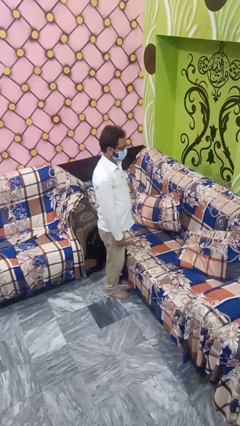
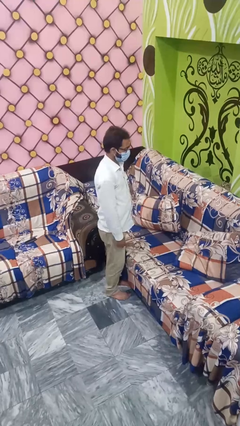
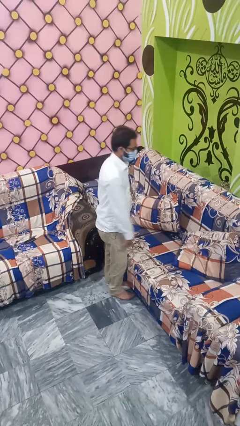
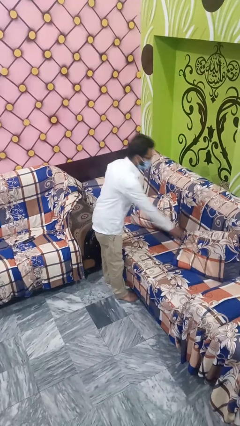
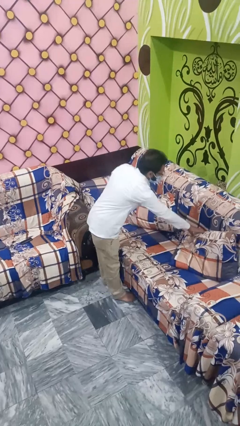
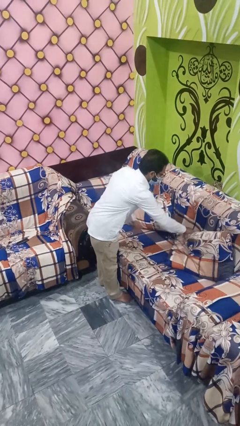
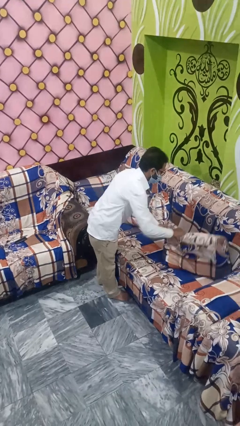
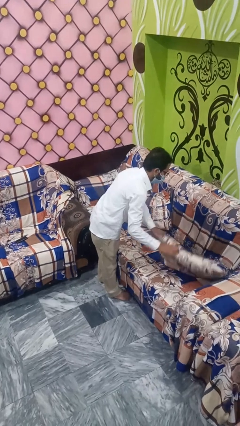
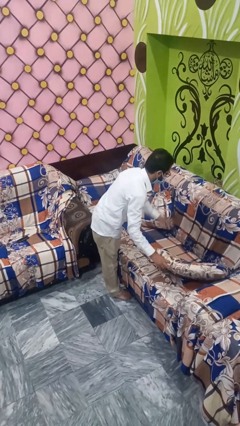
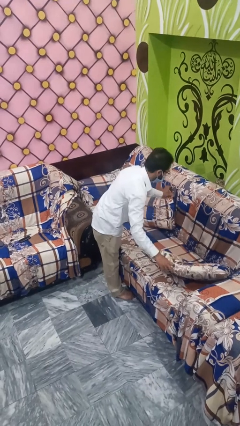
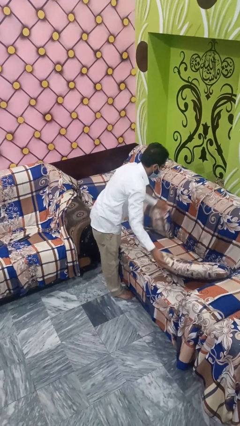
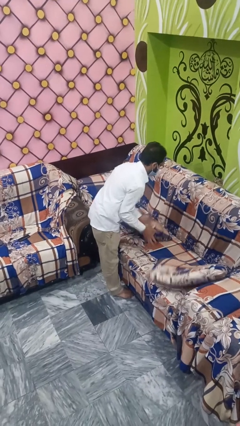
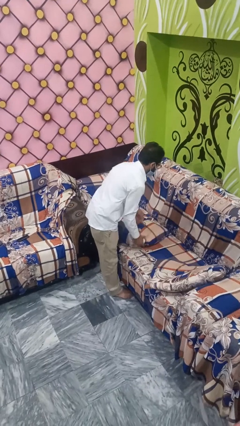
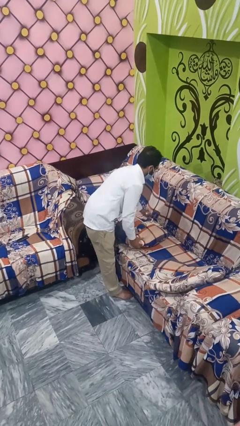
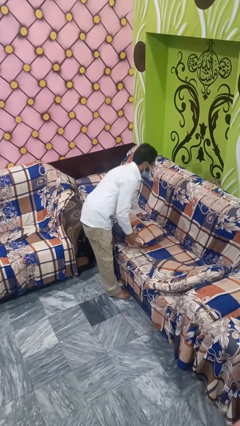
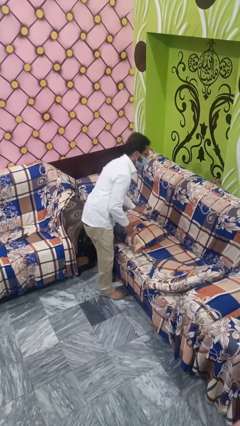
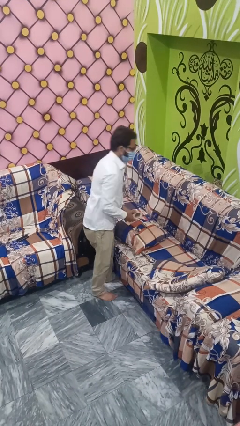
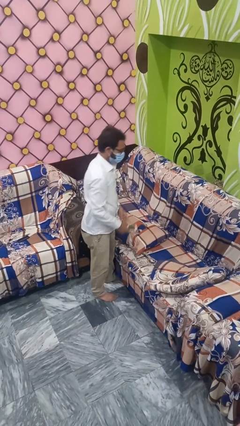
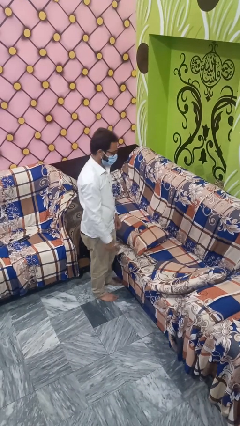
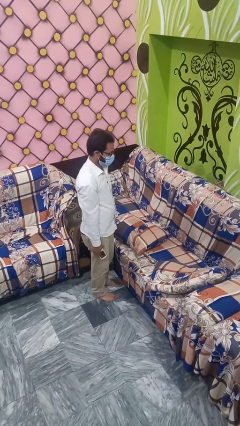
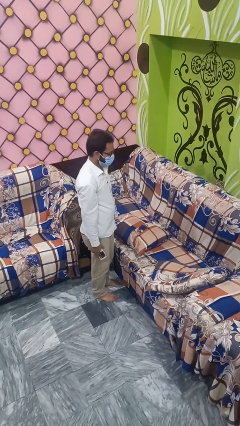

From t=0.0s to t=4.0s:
person searches in couch

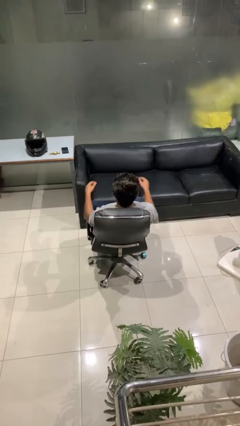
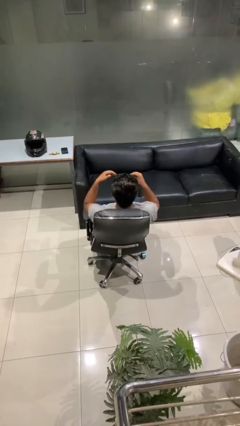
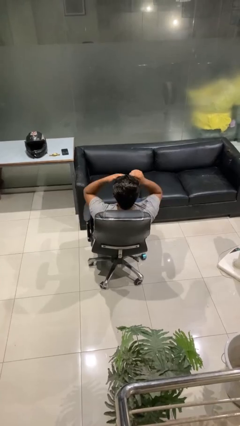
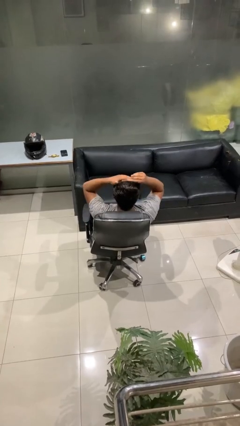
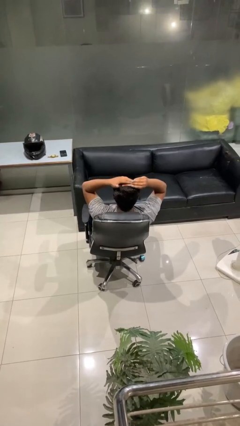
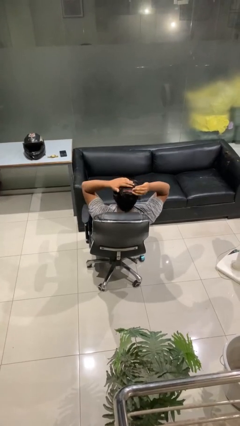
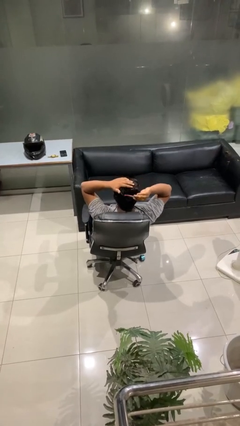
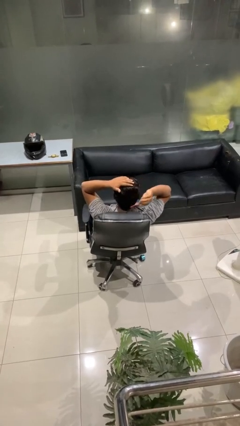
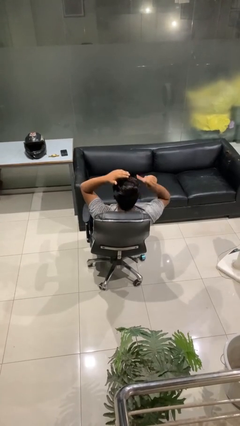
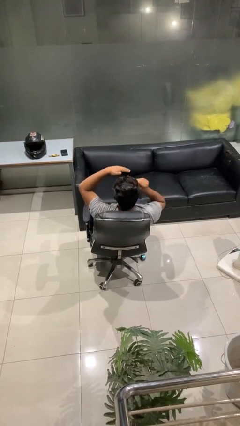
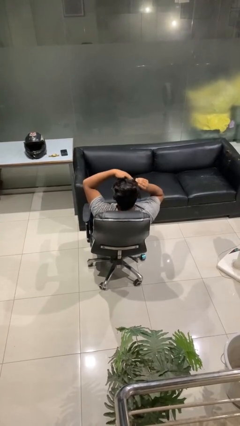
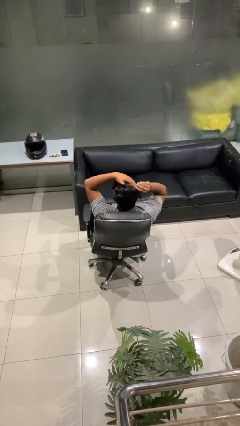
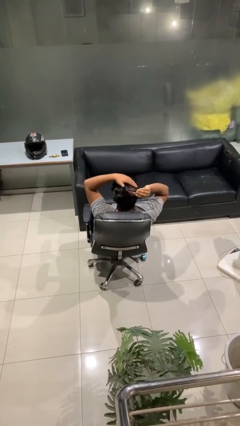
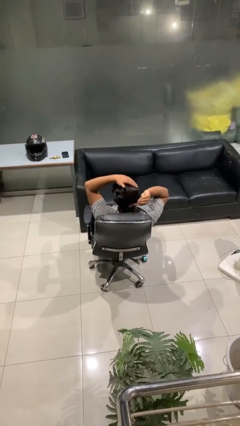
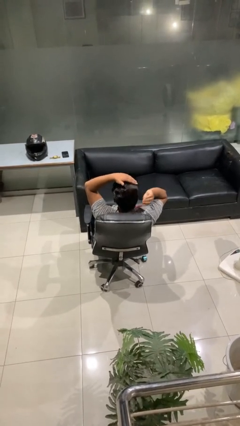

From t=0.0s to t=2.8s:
person brushes hair

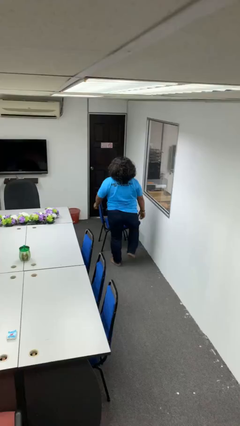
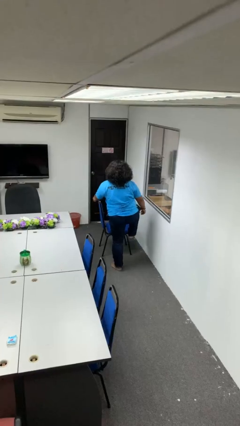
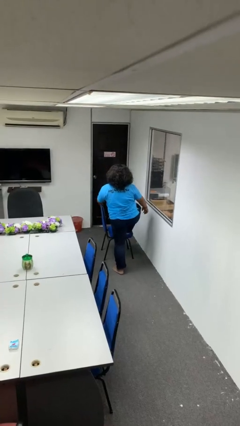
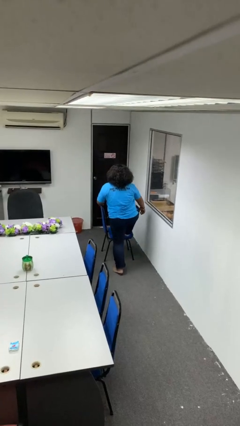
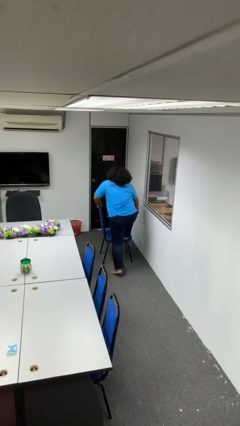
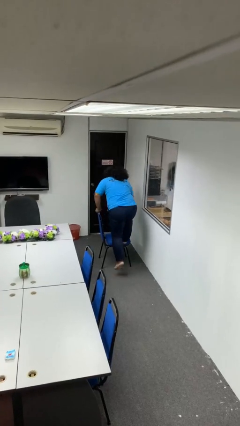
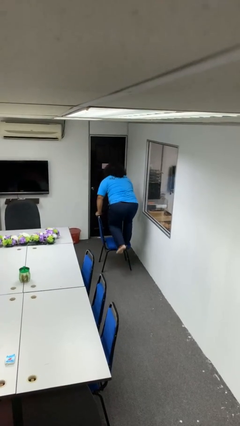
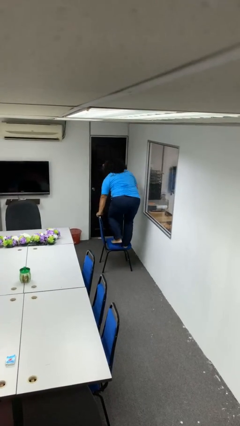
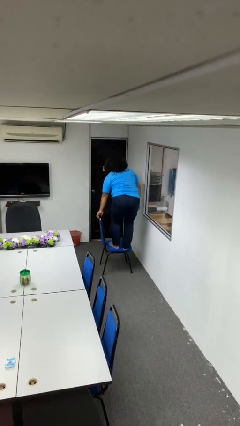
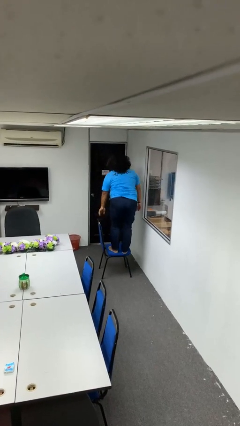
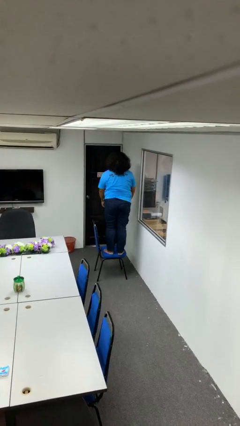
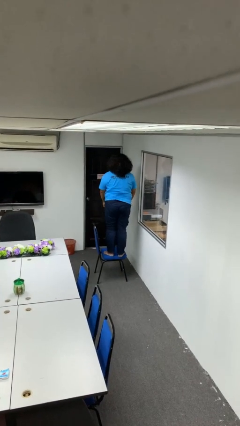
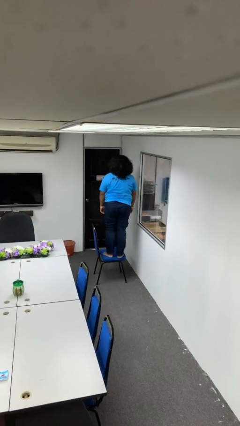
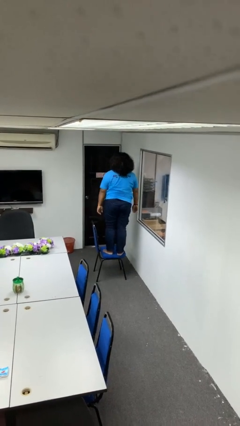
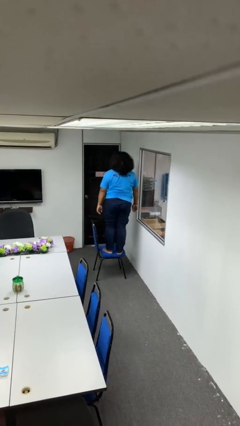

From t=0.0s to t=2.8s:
person climbs on chair

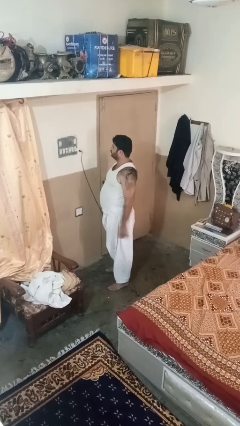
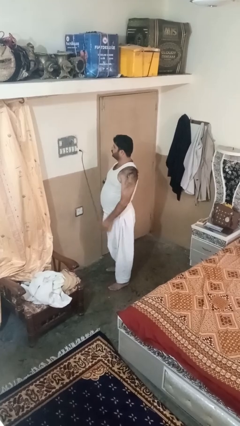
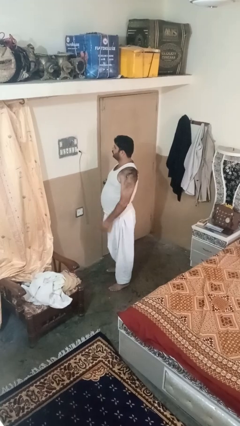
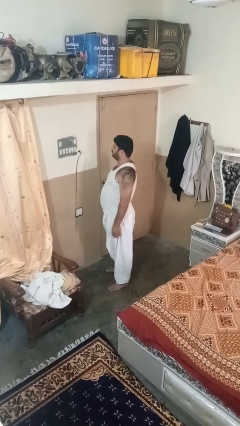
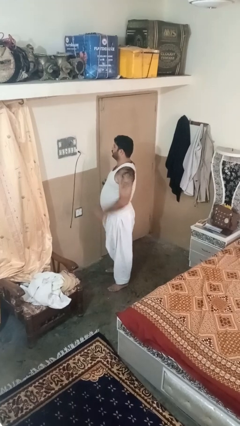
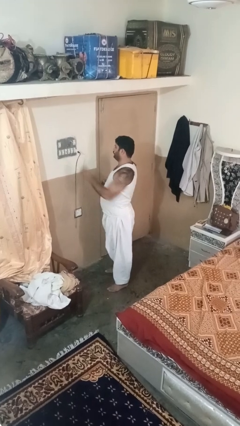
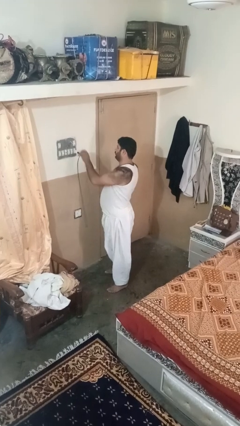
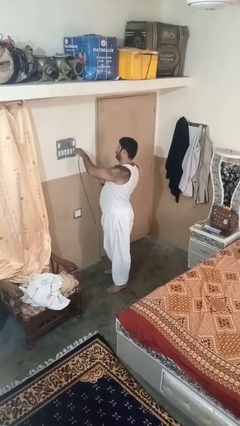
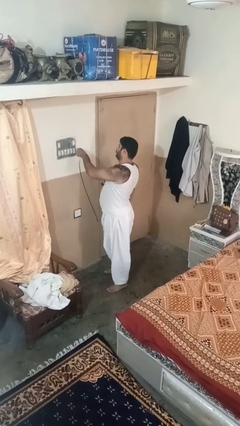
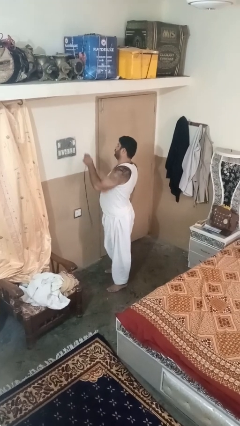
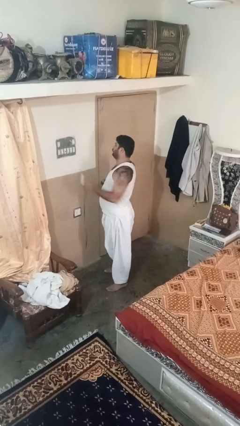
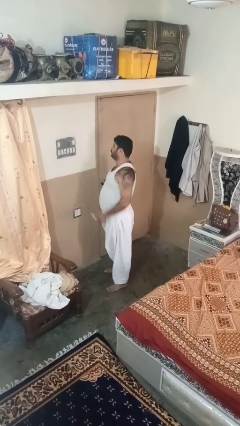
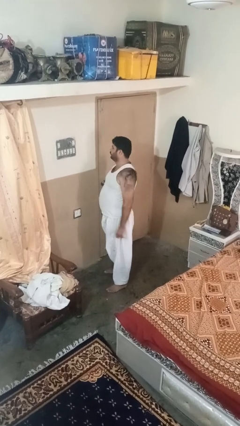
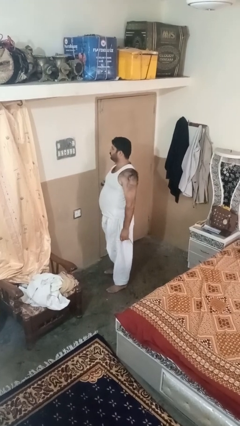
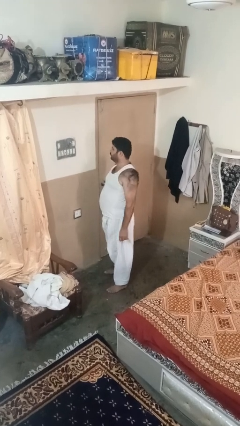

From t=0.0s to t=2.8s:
person unplugs from electrical socket

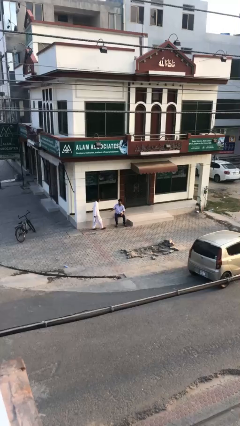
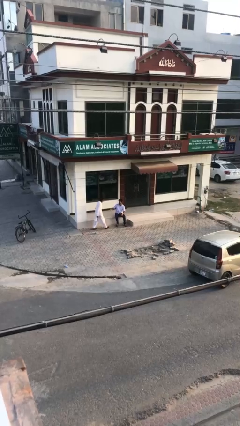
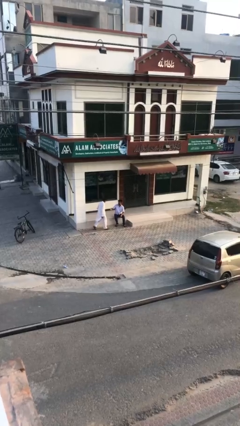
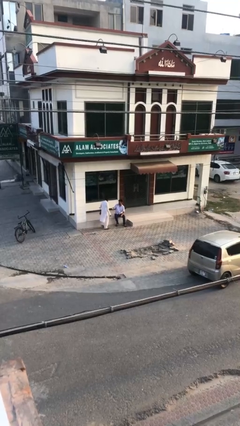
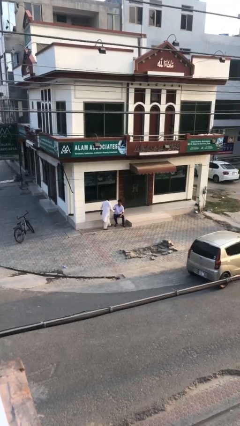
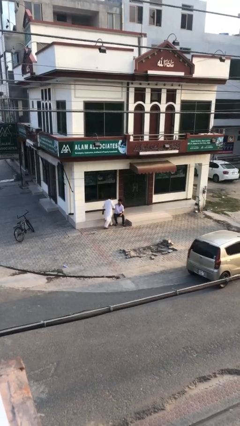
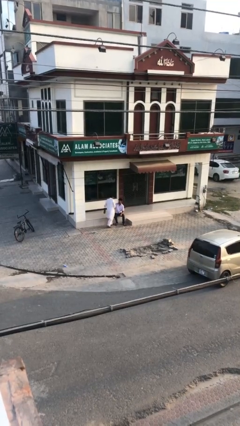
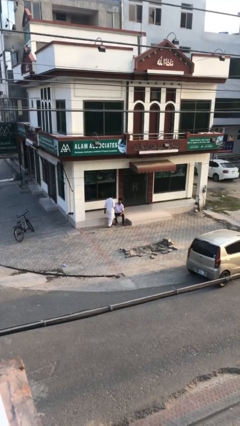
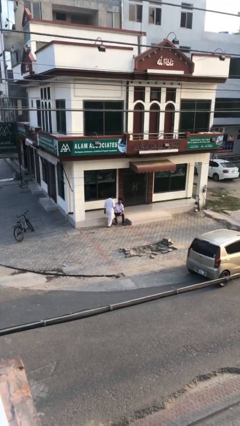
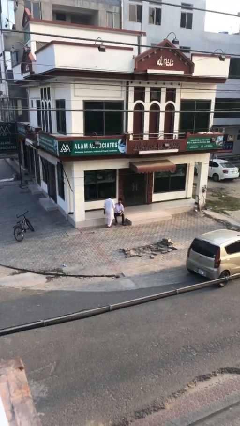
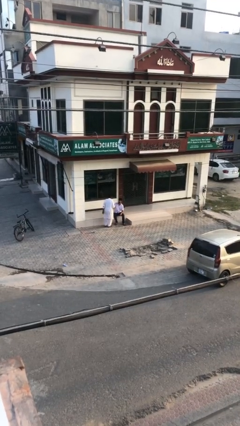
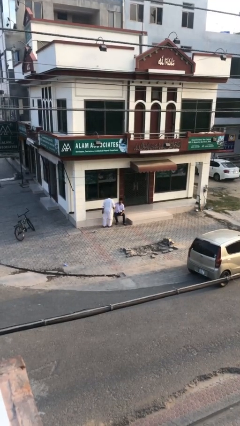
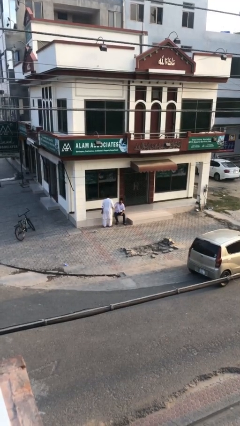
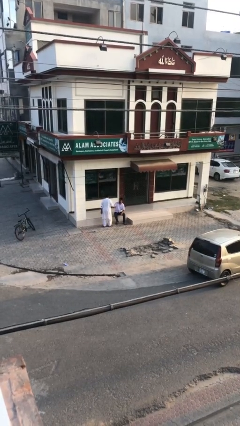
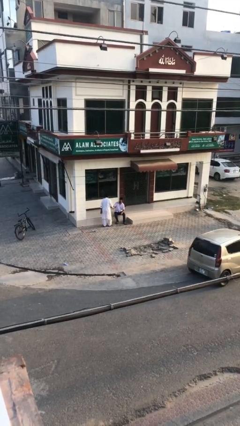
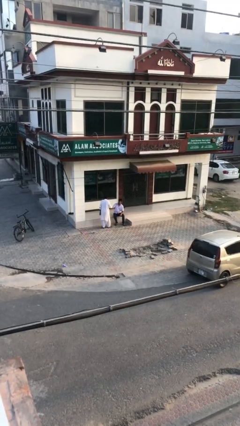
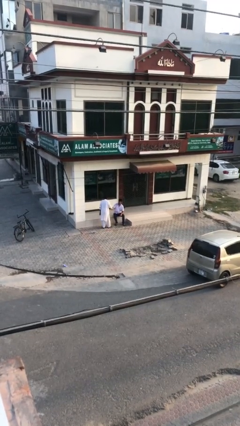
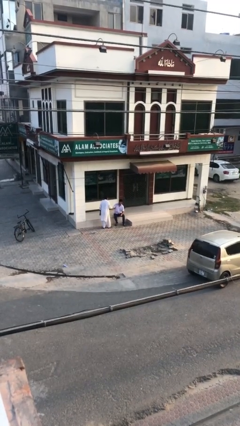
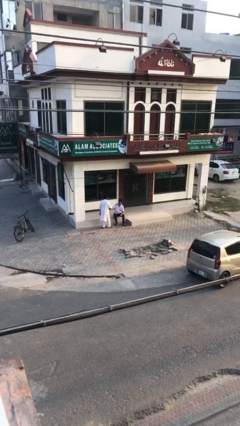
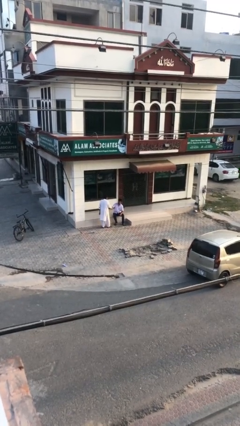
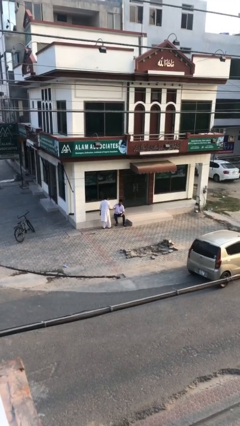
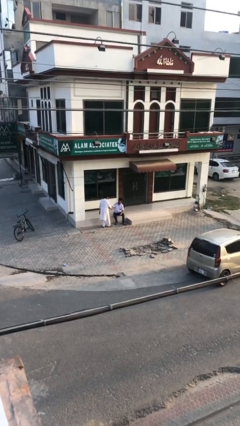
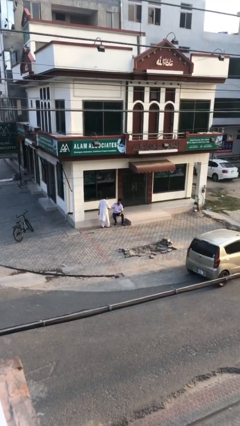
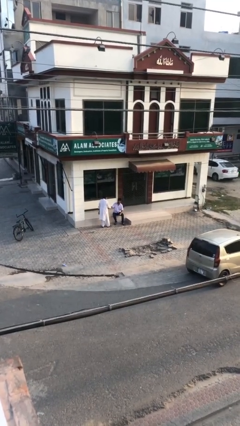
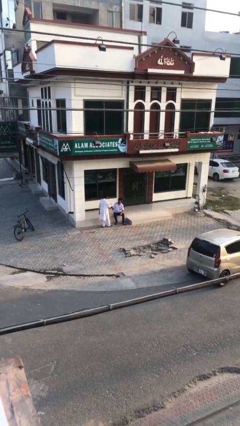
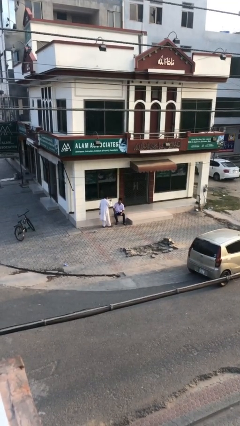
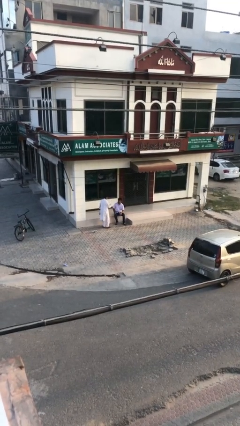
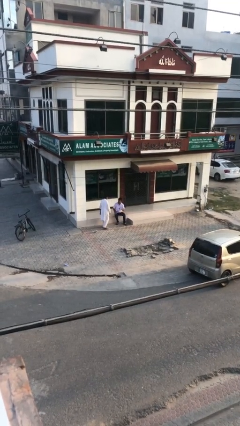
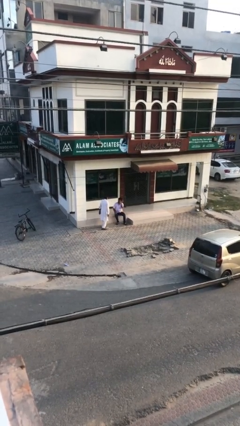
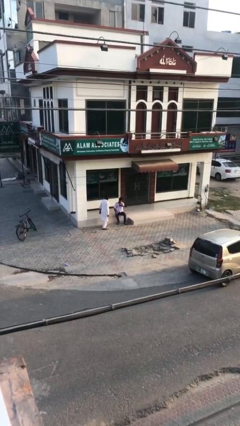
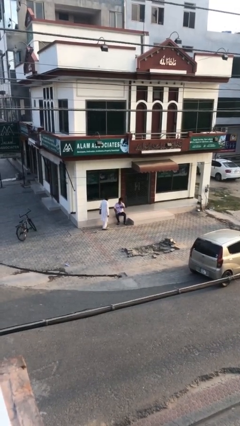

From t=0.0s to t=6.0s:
person shakes hand
